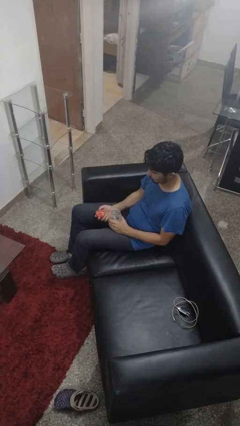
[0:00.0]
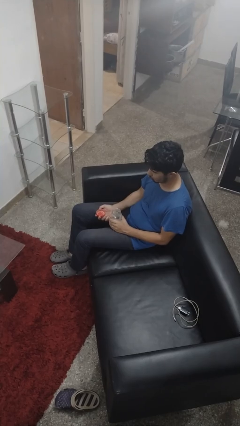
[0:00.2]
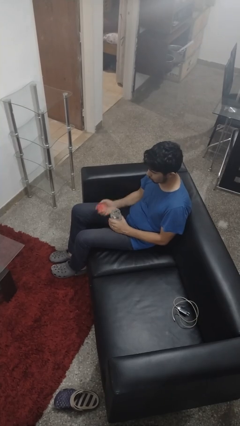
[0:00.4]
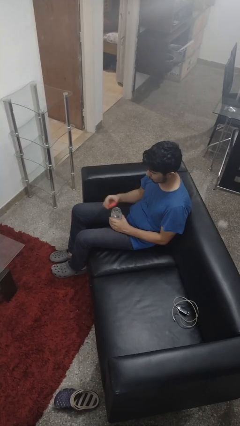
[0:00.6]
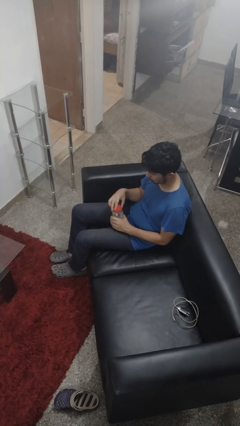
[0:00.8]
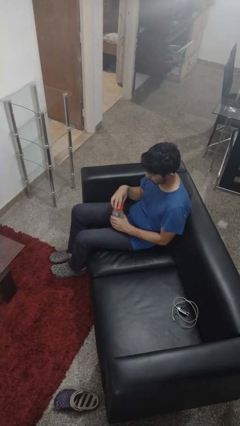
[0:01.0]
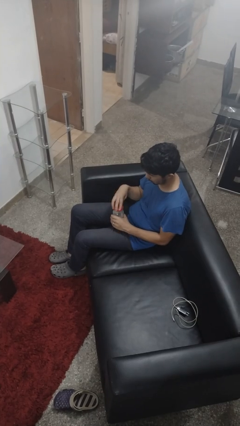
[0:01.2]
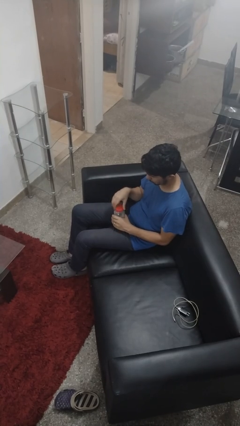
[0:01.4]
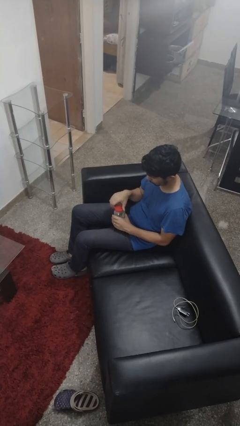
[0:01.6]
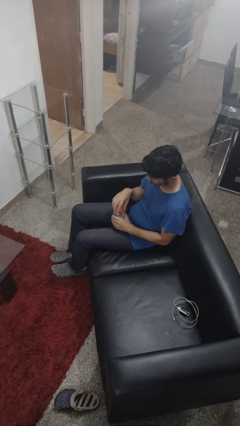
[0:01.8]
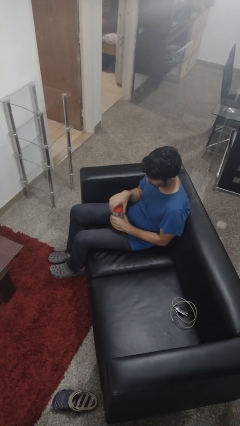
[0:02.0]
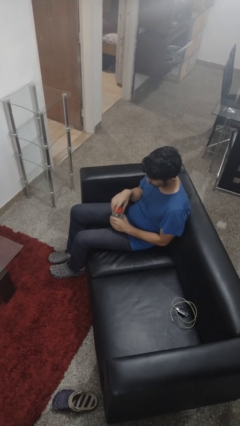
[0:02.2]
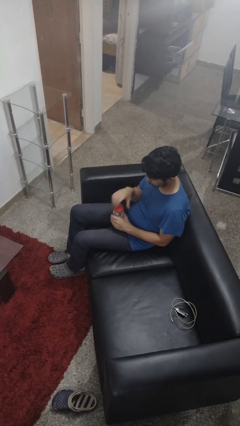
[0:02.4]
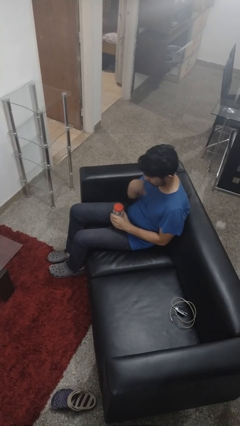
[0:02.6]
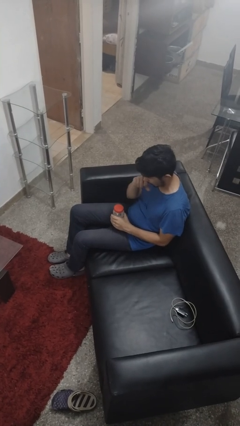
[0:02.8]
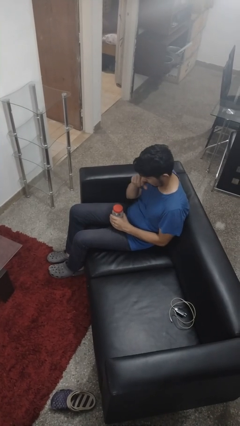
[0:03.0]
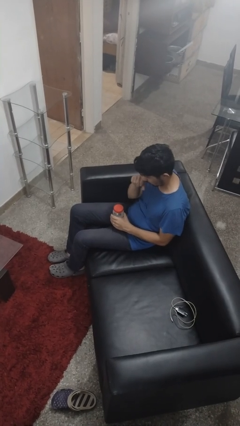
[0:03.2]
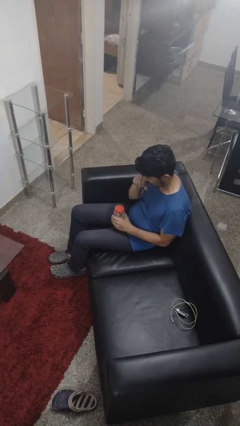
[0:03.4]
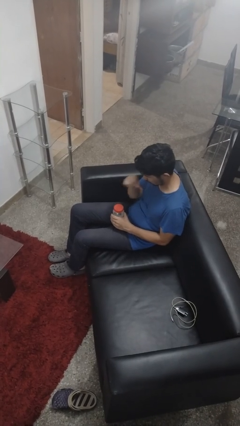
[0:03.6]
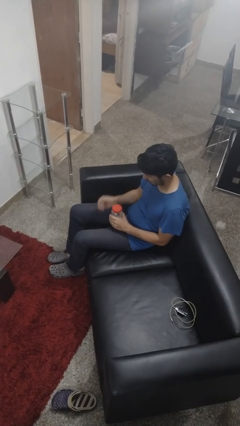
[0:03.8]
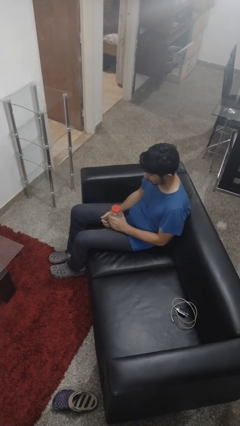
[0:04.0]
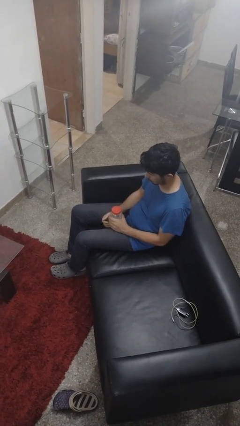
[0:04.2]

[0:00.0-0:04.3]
person closes jar

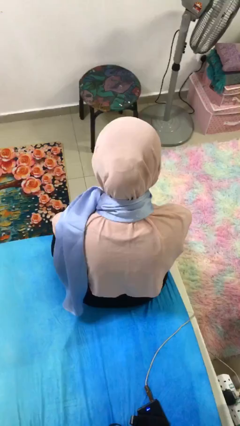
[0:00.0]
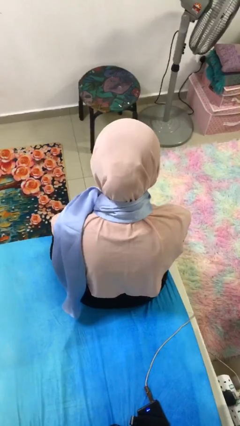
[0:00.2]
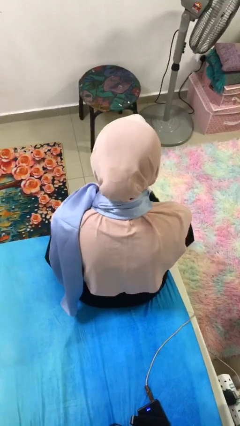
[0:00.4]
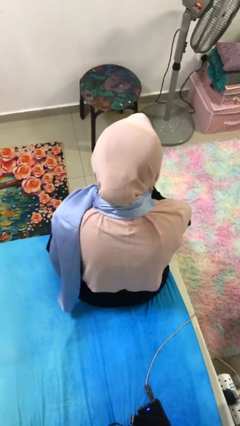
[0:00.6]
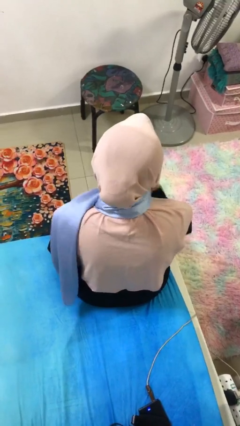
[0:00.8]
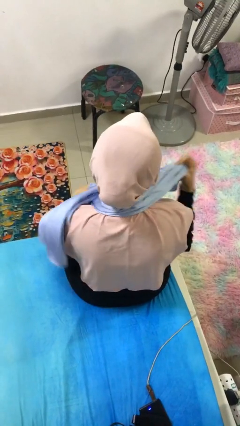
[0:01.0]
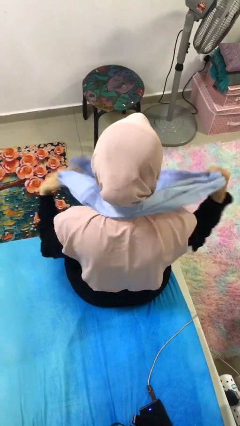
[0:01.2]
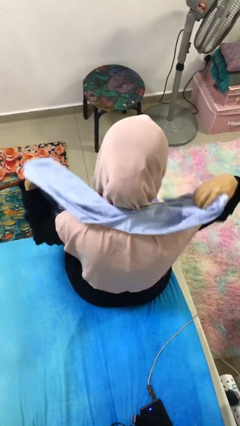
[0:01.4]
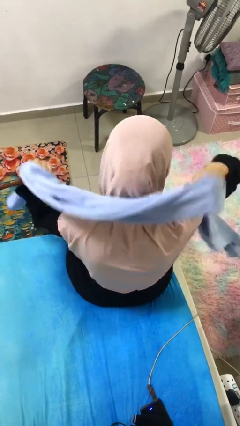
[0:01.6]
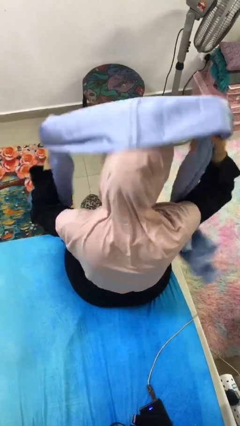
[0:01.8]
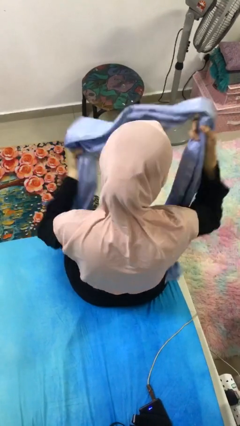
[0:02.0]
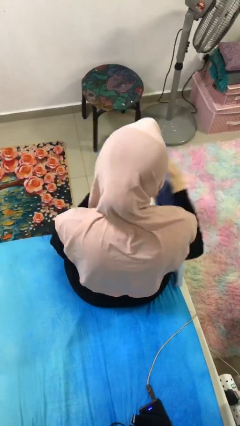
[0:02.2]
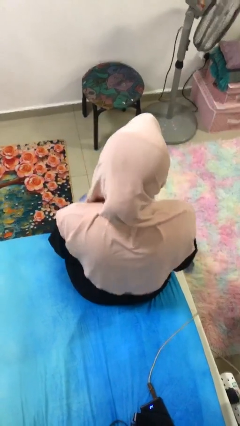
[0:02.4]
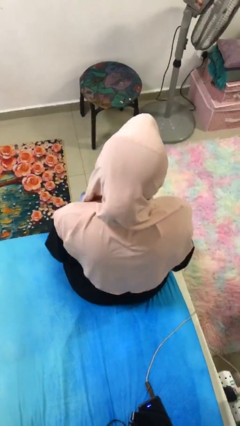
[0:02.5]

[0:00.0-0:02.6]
person takes off scarf

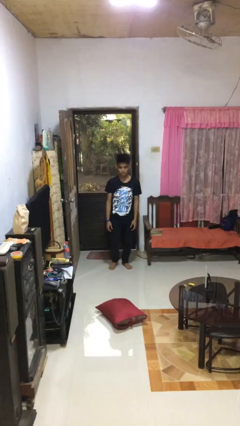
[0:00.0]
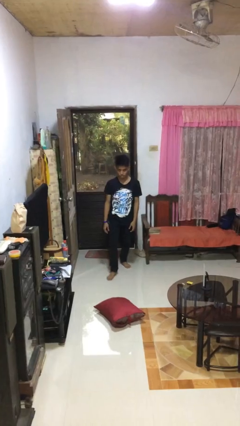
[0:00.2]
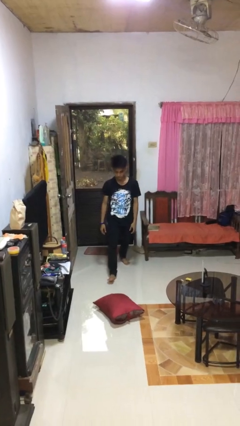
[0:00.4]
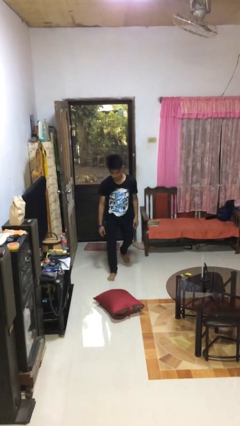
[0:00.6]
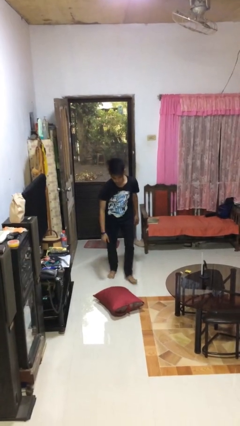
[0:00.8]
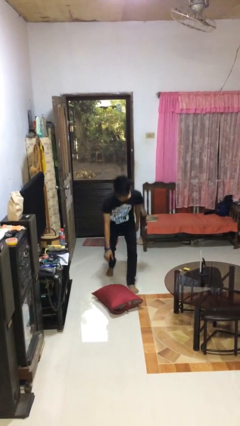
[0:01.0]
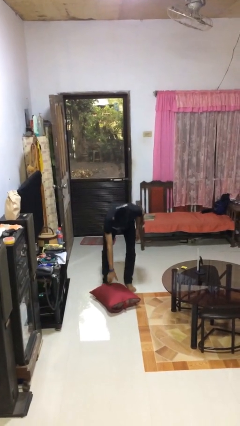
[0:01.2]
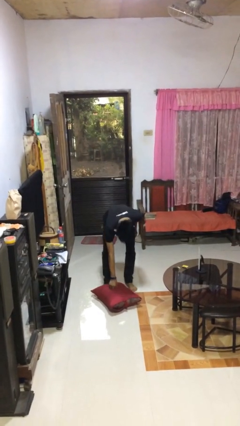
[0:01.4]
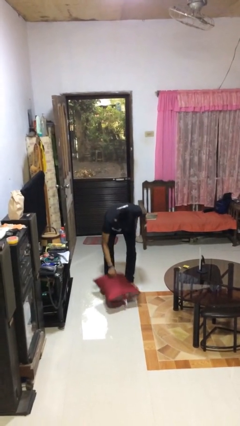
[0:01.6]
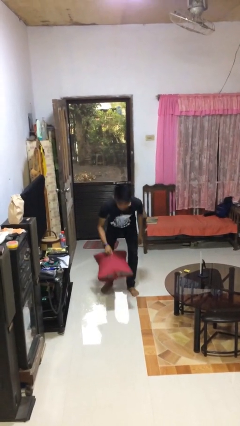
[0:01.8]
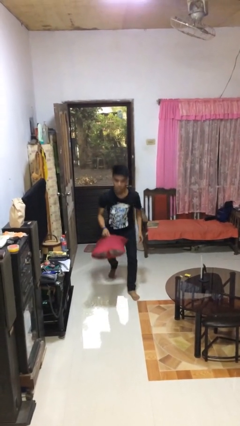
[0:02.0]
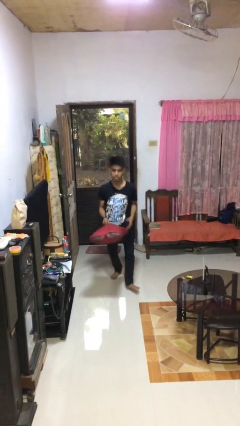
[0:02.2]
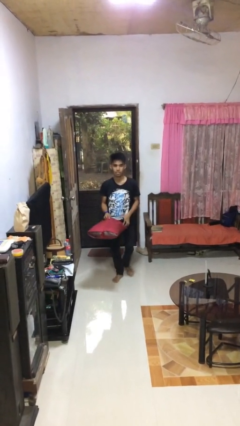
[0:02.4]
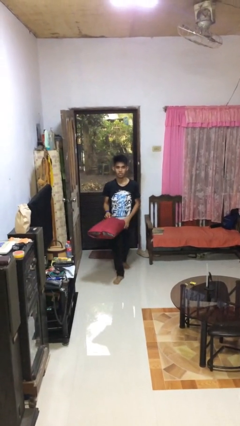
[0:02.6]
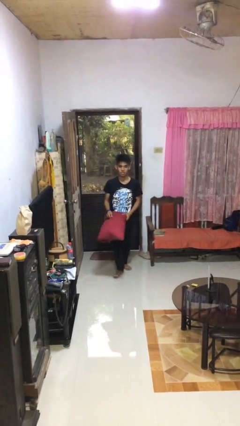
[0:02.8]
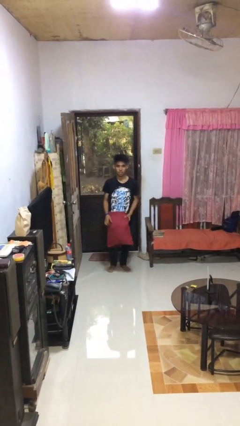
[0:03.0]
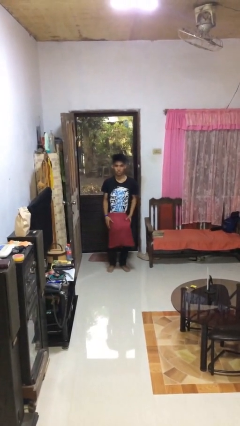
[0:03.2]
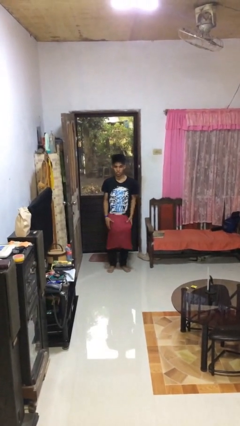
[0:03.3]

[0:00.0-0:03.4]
person picks up object from floor

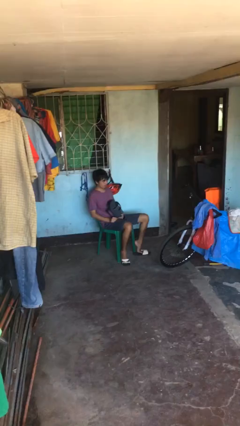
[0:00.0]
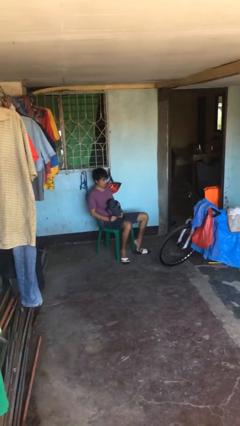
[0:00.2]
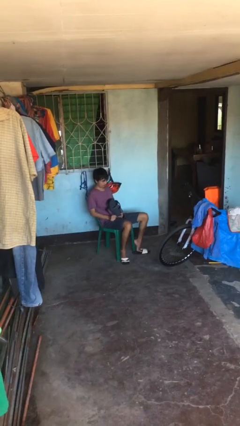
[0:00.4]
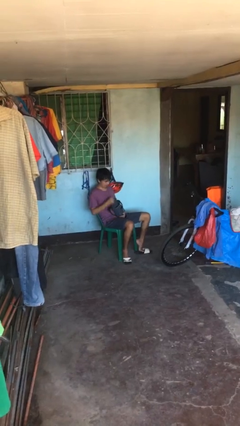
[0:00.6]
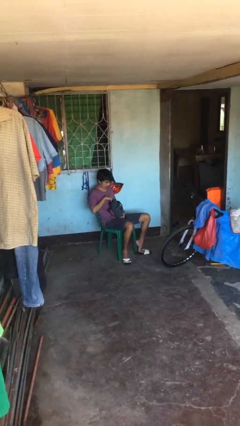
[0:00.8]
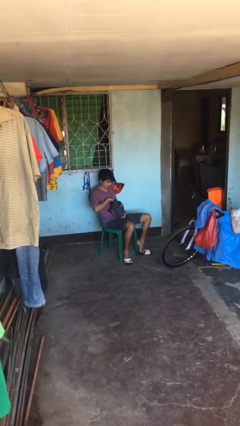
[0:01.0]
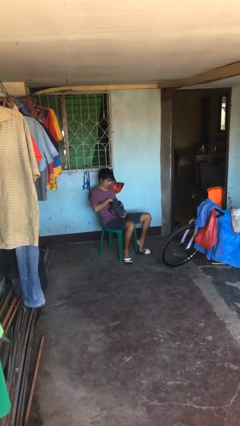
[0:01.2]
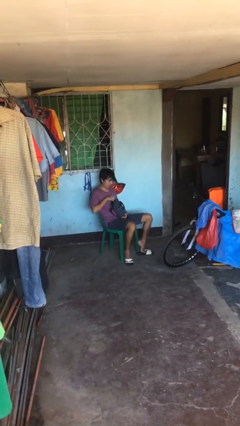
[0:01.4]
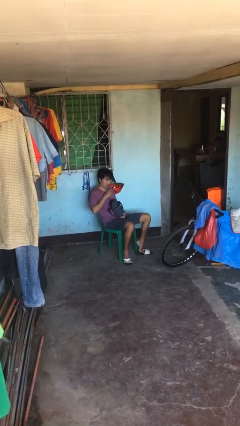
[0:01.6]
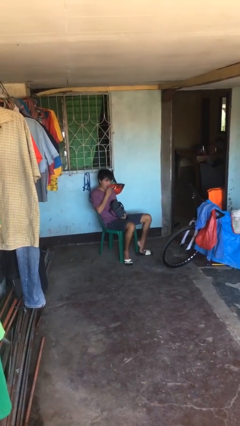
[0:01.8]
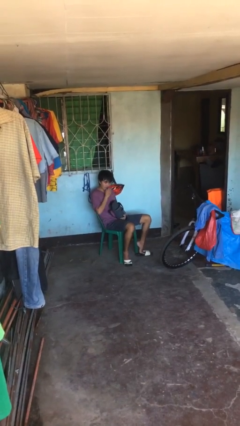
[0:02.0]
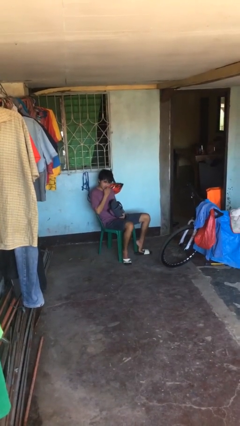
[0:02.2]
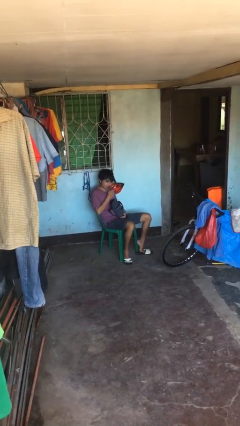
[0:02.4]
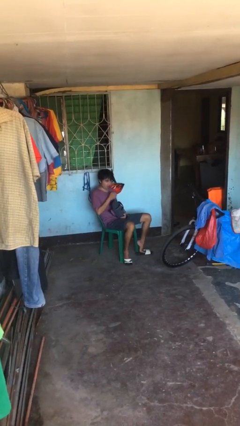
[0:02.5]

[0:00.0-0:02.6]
person eats snack from bag

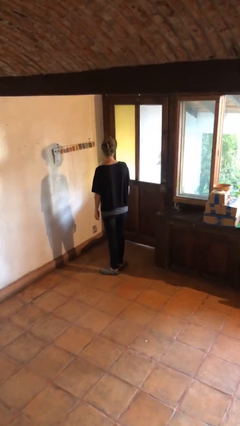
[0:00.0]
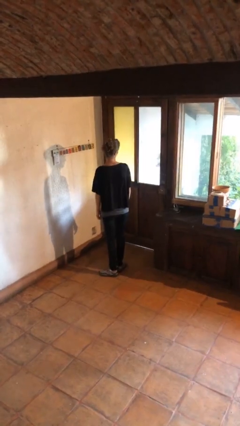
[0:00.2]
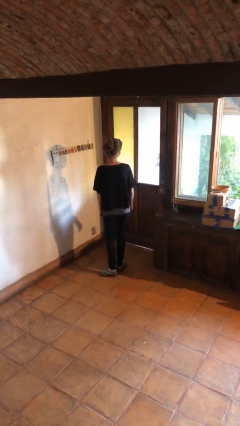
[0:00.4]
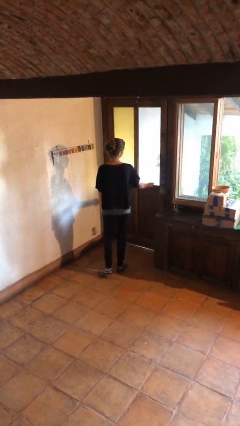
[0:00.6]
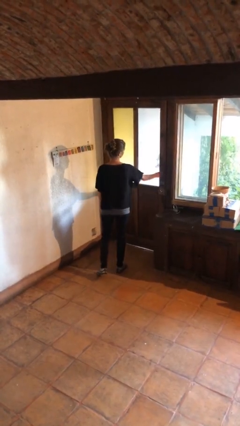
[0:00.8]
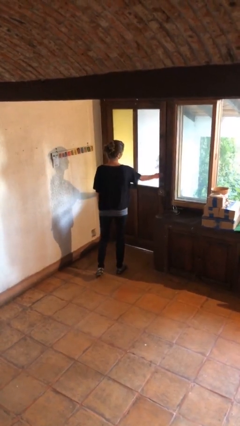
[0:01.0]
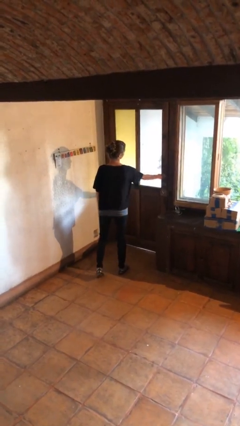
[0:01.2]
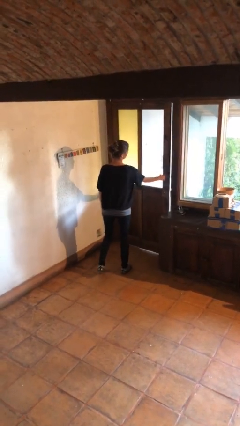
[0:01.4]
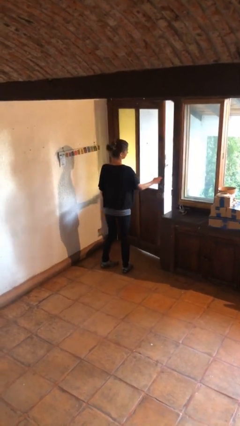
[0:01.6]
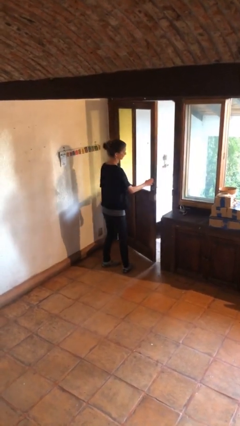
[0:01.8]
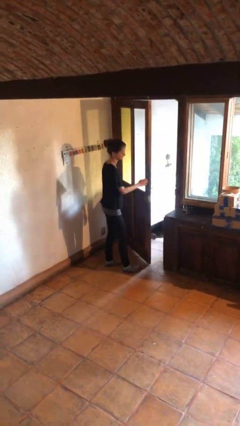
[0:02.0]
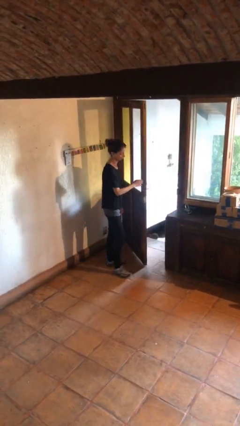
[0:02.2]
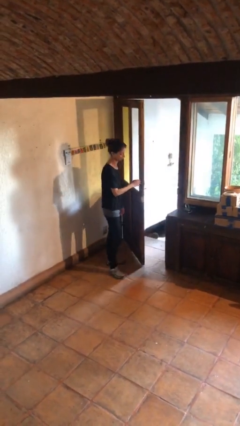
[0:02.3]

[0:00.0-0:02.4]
person opens facility door

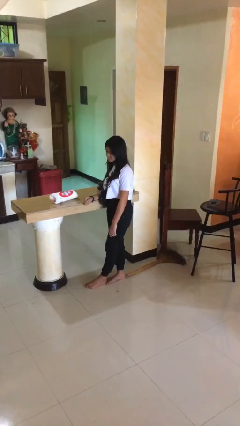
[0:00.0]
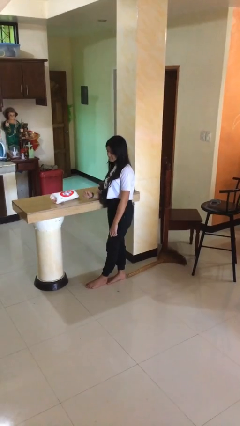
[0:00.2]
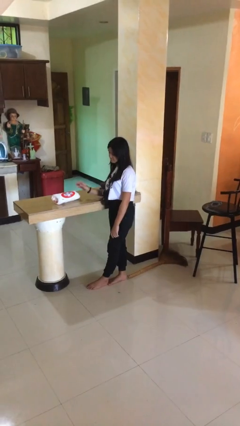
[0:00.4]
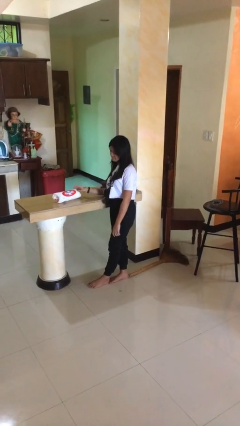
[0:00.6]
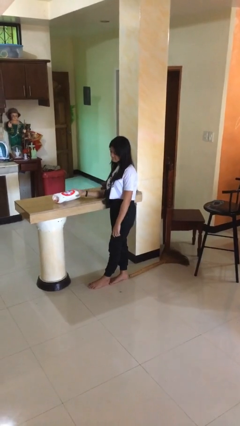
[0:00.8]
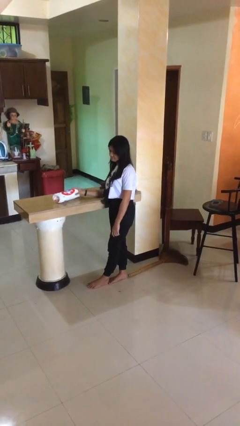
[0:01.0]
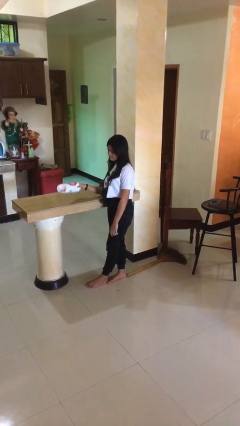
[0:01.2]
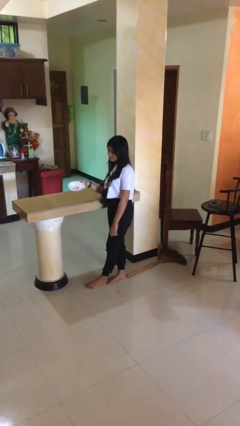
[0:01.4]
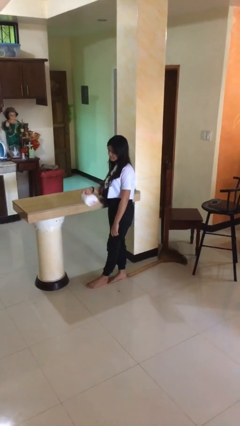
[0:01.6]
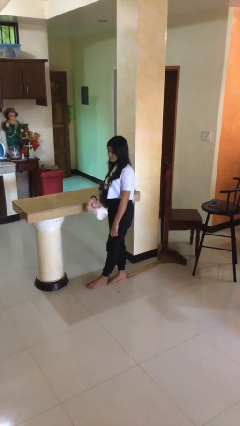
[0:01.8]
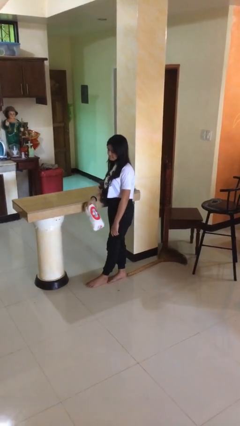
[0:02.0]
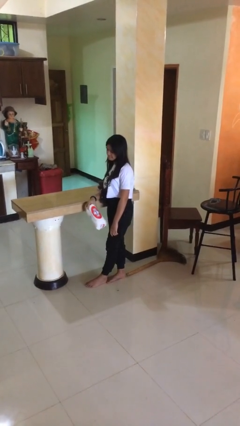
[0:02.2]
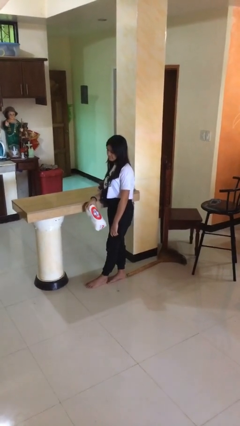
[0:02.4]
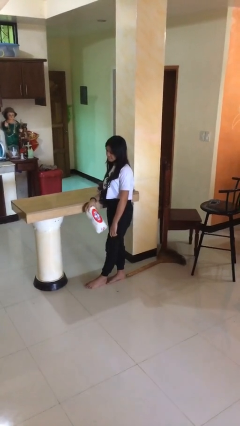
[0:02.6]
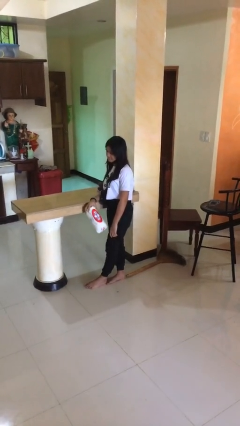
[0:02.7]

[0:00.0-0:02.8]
person picks up object from countertop
